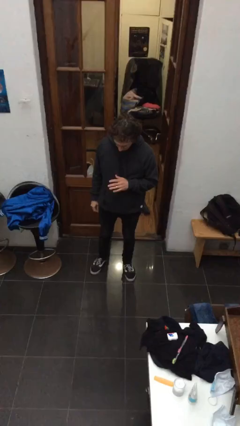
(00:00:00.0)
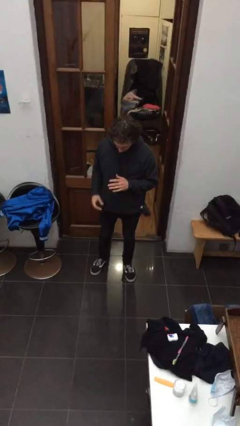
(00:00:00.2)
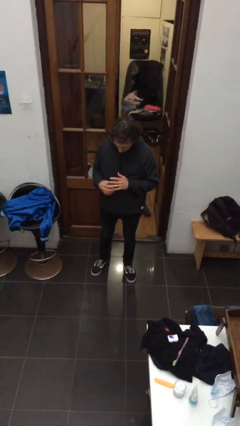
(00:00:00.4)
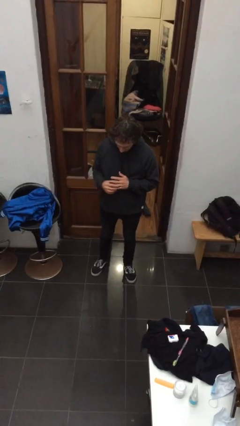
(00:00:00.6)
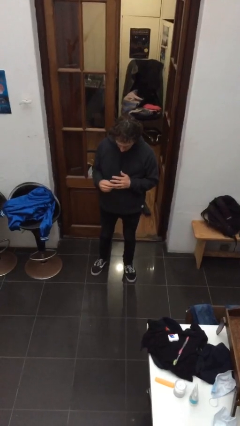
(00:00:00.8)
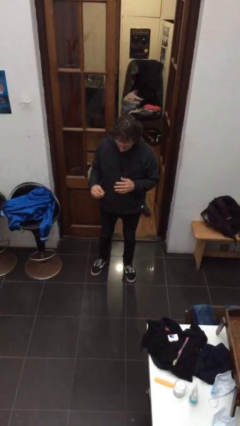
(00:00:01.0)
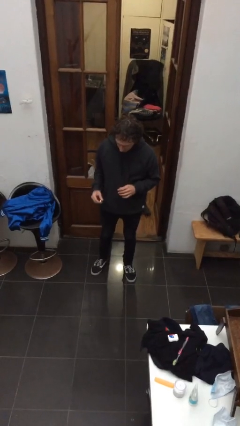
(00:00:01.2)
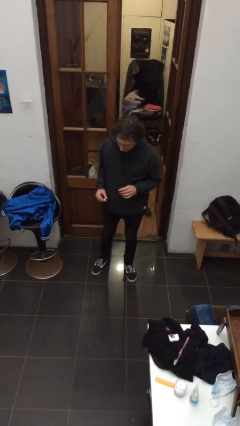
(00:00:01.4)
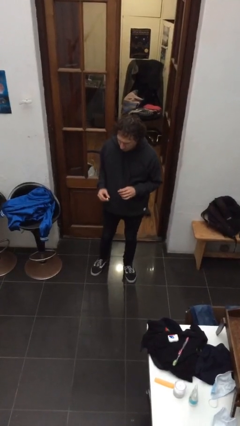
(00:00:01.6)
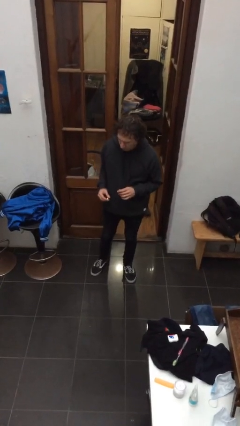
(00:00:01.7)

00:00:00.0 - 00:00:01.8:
person takes off ring

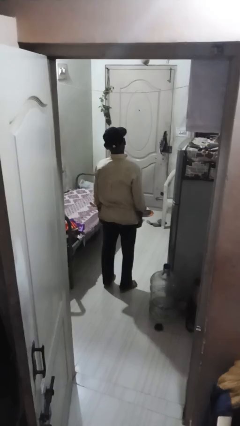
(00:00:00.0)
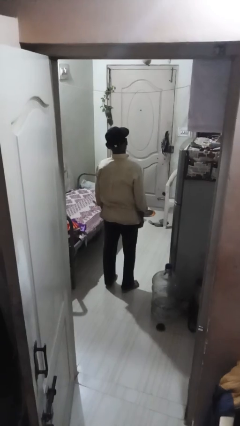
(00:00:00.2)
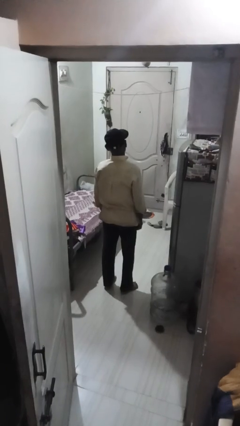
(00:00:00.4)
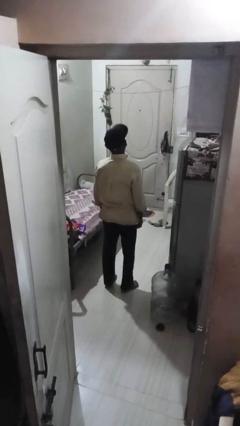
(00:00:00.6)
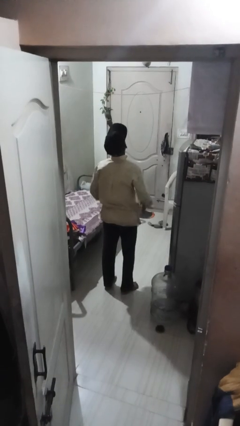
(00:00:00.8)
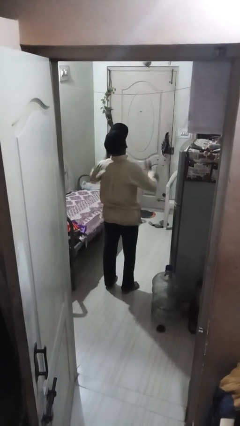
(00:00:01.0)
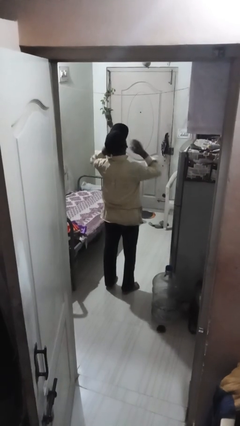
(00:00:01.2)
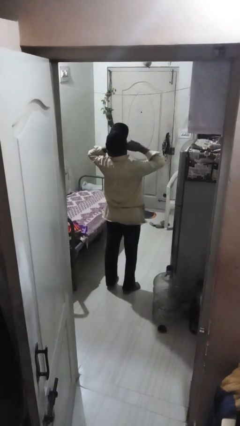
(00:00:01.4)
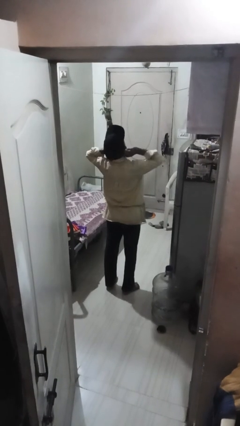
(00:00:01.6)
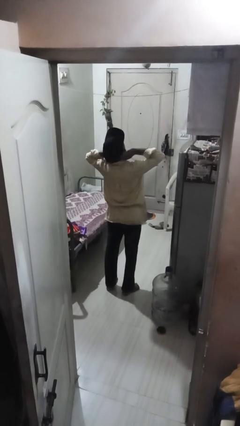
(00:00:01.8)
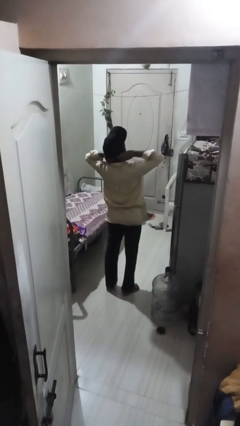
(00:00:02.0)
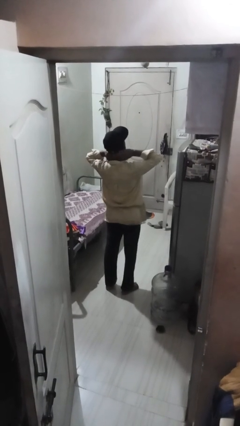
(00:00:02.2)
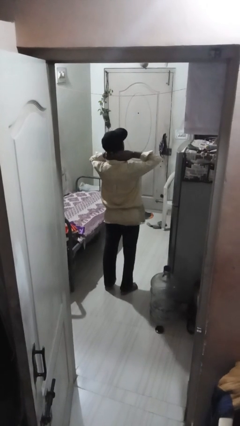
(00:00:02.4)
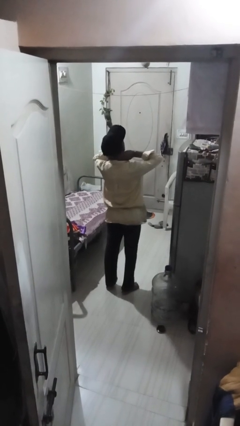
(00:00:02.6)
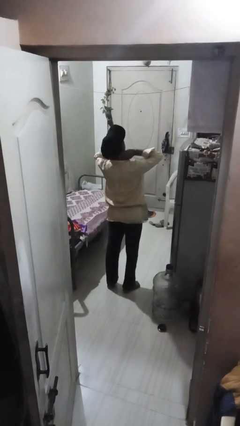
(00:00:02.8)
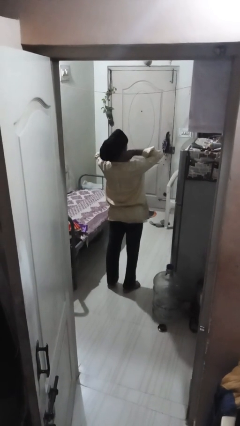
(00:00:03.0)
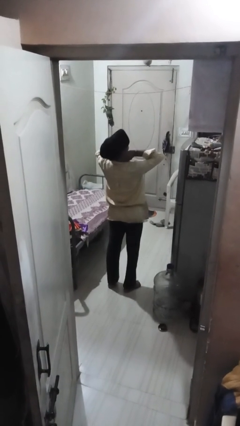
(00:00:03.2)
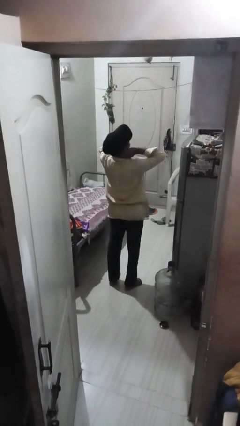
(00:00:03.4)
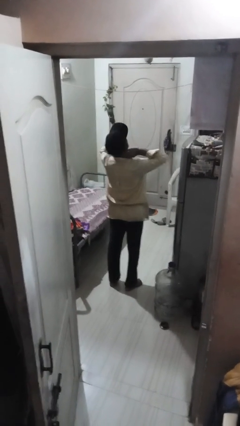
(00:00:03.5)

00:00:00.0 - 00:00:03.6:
person rubs neck

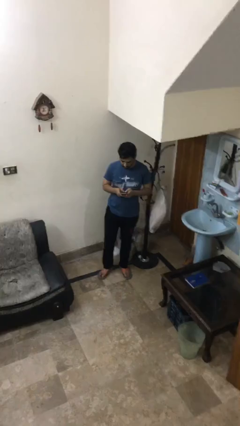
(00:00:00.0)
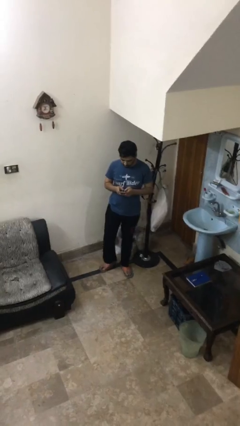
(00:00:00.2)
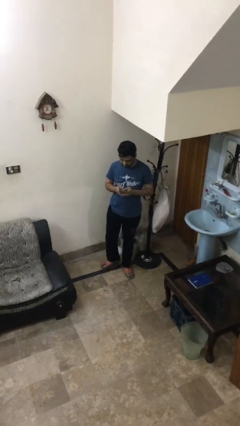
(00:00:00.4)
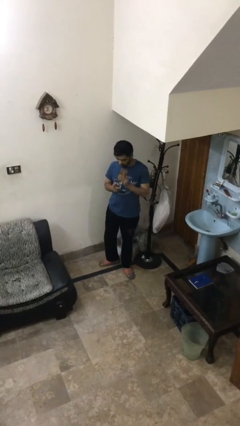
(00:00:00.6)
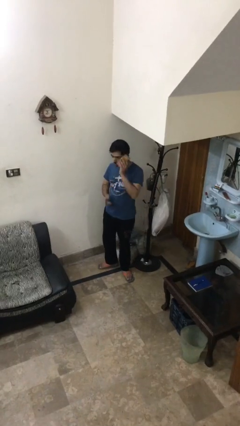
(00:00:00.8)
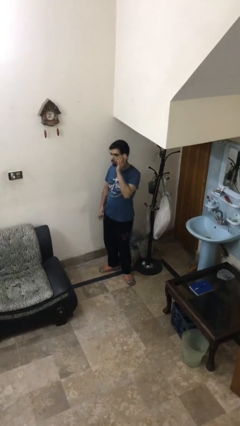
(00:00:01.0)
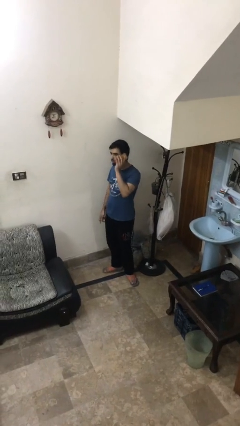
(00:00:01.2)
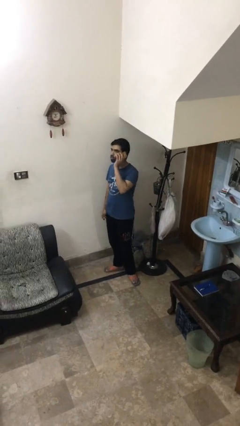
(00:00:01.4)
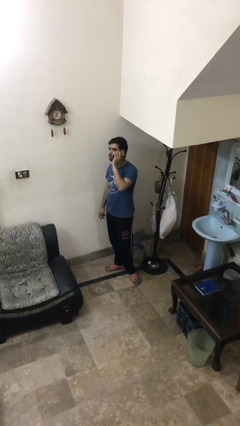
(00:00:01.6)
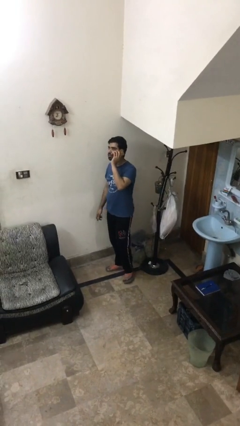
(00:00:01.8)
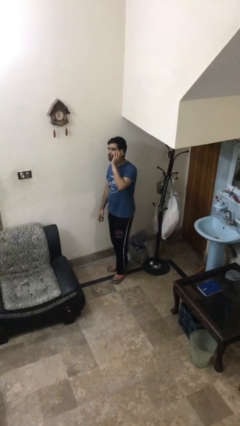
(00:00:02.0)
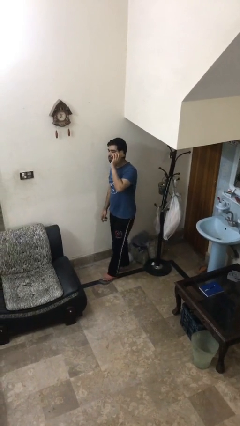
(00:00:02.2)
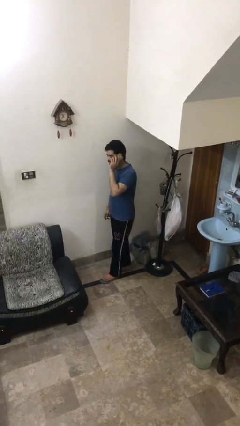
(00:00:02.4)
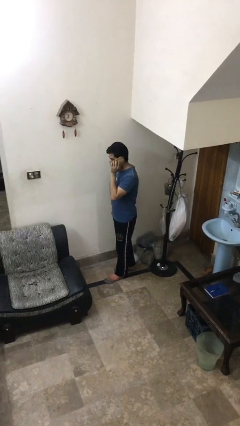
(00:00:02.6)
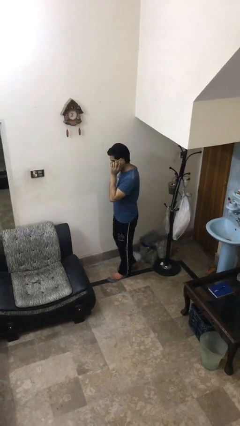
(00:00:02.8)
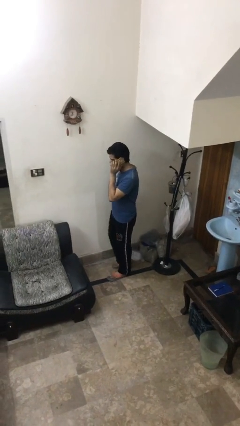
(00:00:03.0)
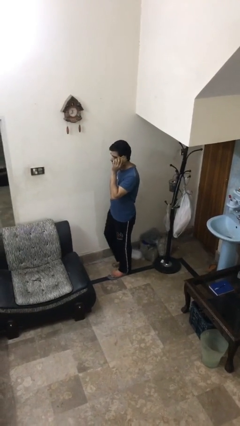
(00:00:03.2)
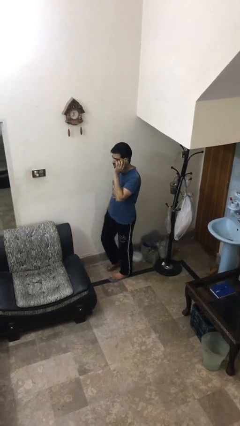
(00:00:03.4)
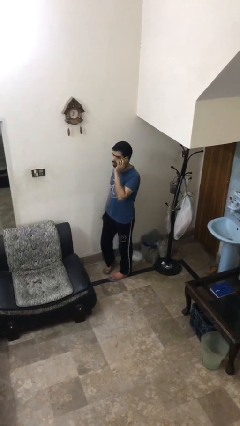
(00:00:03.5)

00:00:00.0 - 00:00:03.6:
person talks on phone

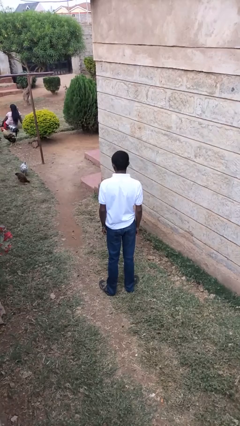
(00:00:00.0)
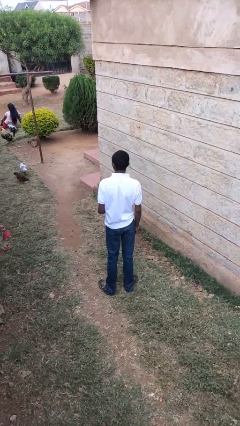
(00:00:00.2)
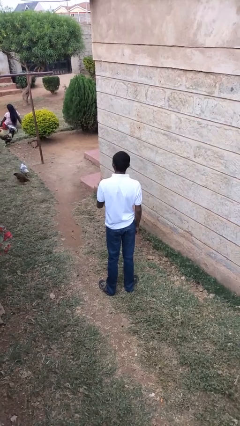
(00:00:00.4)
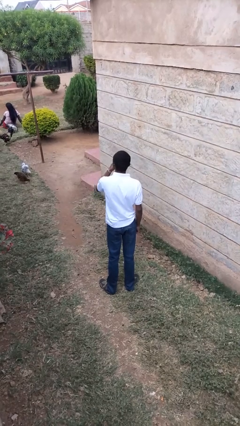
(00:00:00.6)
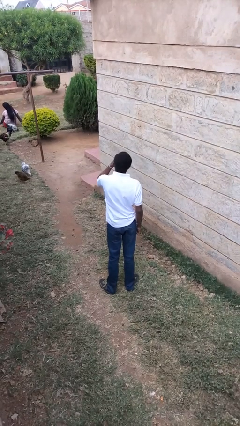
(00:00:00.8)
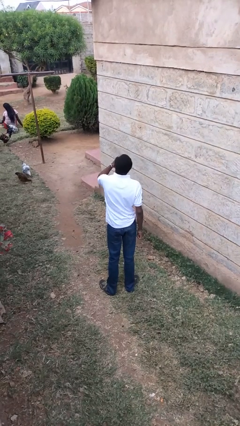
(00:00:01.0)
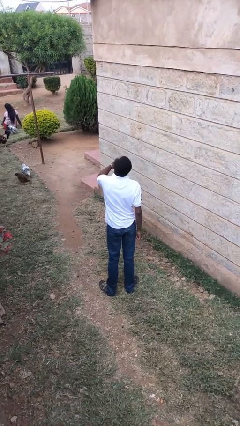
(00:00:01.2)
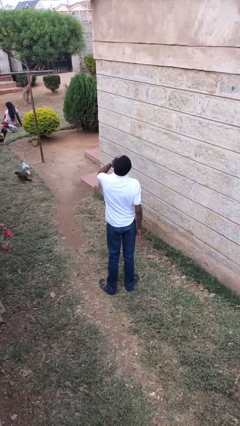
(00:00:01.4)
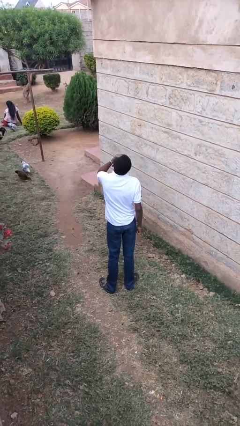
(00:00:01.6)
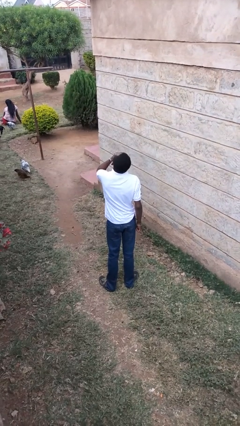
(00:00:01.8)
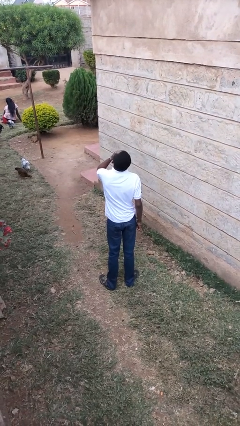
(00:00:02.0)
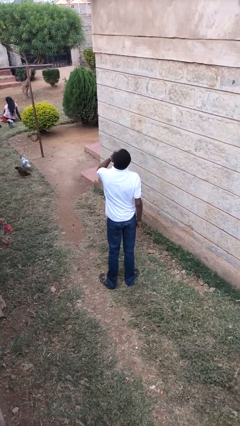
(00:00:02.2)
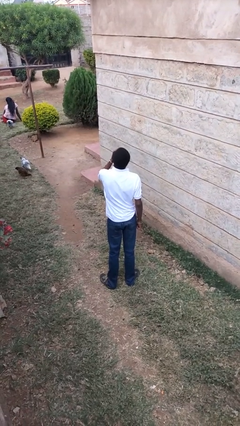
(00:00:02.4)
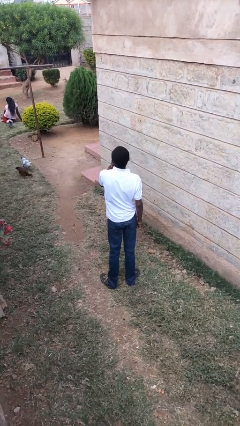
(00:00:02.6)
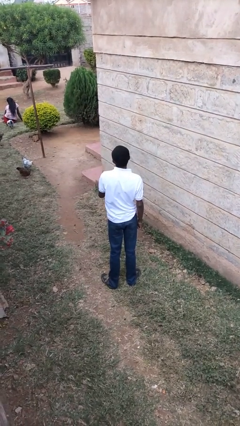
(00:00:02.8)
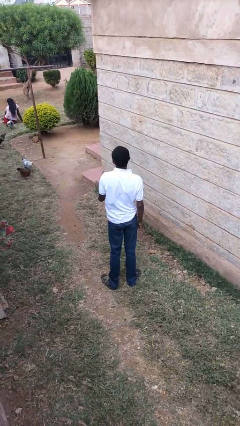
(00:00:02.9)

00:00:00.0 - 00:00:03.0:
person yawns

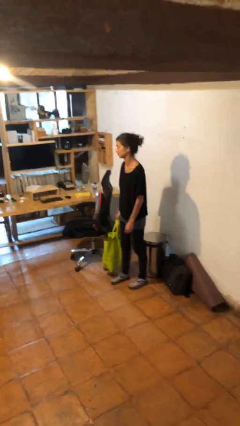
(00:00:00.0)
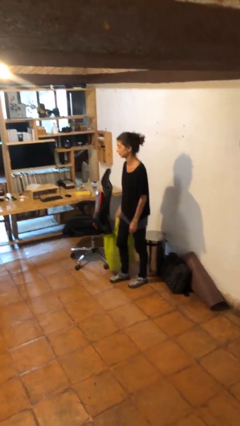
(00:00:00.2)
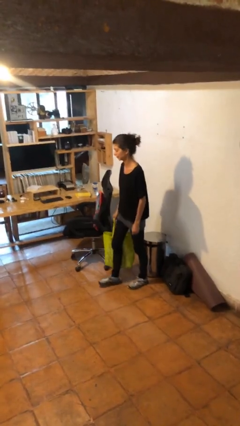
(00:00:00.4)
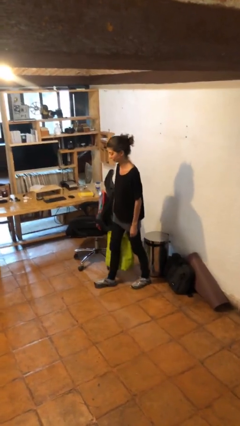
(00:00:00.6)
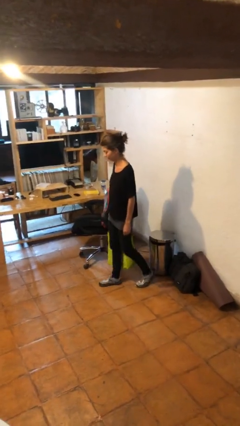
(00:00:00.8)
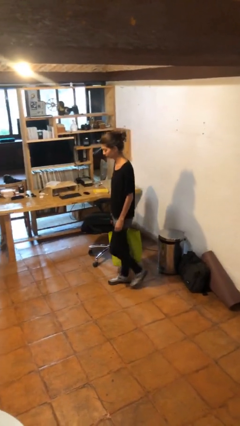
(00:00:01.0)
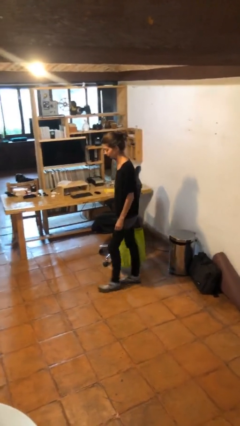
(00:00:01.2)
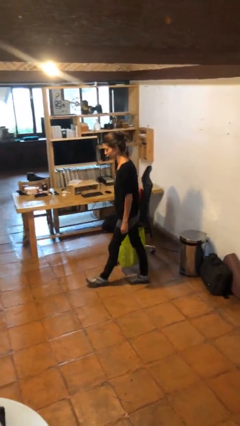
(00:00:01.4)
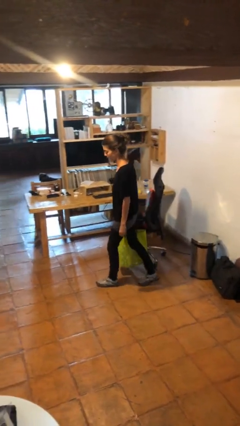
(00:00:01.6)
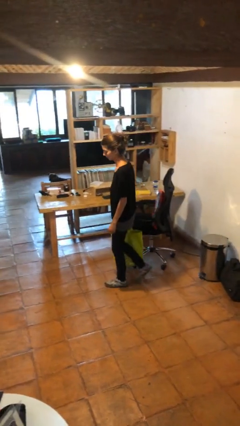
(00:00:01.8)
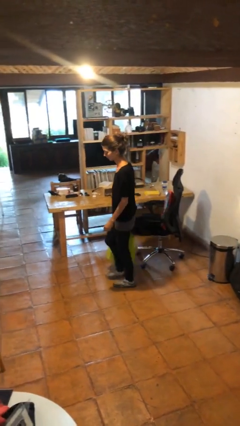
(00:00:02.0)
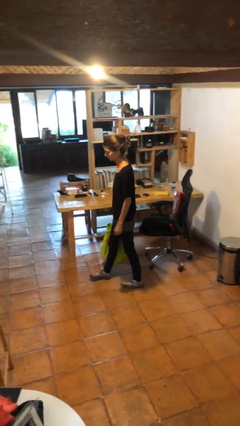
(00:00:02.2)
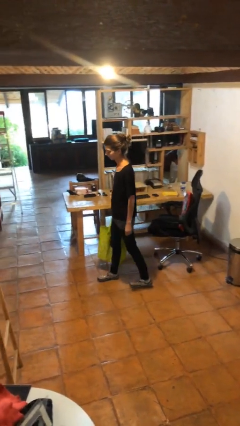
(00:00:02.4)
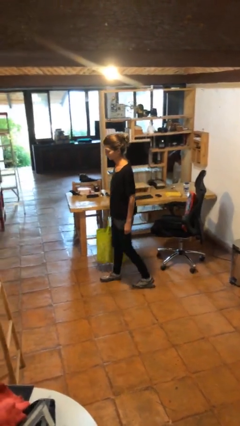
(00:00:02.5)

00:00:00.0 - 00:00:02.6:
person carries groceries

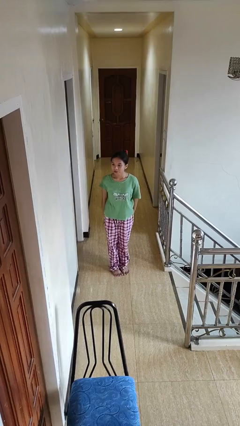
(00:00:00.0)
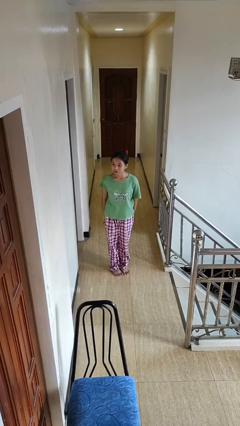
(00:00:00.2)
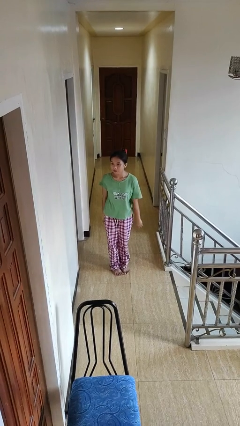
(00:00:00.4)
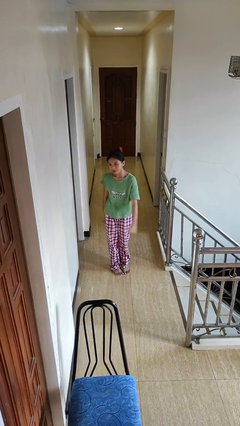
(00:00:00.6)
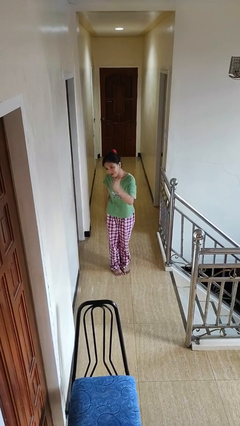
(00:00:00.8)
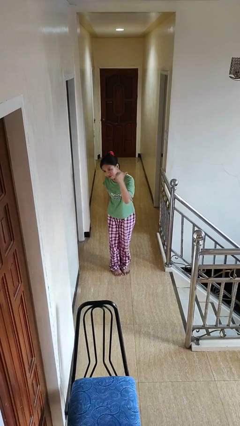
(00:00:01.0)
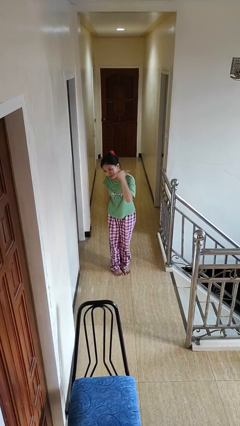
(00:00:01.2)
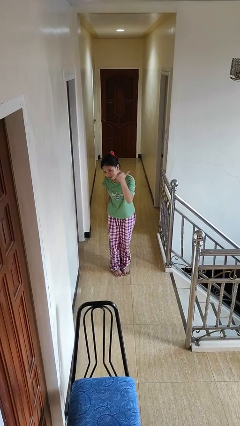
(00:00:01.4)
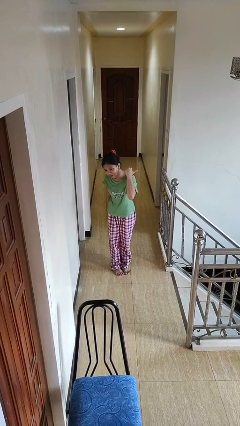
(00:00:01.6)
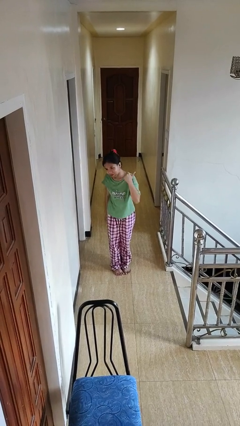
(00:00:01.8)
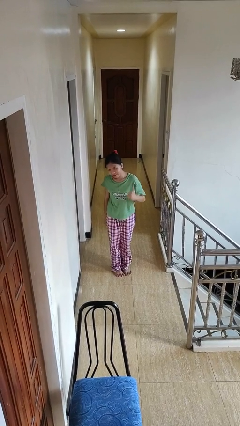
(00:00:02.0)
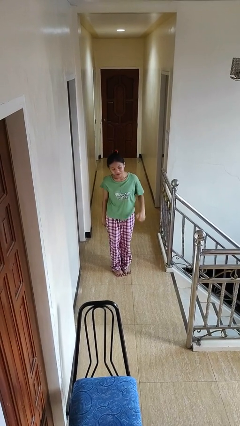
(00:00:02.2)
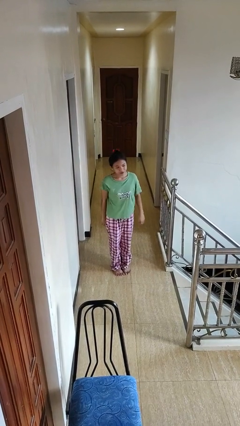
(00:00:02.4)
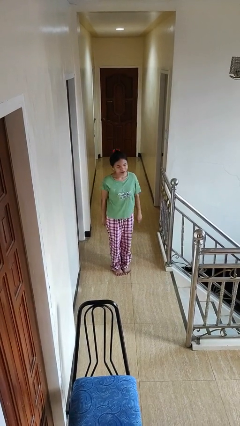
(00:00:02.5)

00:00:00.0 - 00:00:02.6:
person gestures behind me
